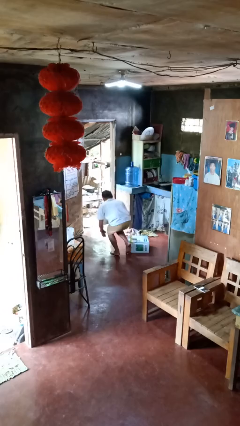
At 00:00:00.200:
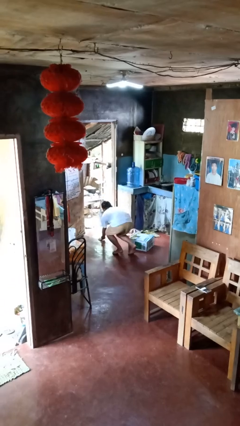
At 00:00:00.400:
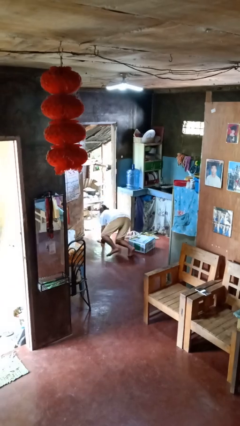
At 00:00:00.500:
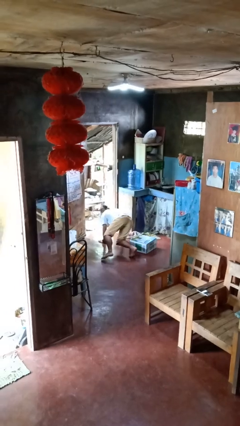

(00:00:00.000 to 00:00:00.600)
person trips on object on floor

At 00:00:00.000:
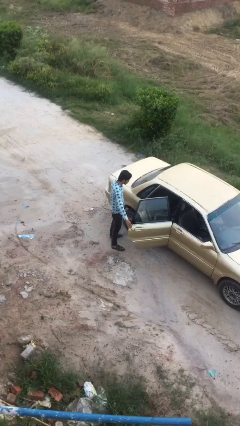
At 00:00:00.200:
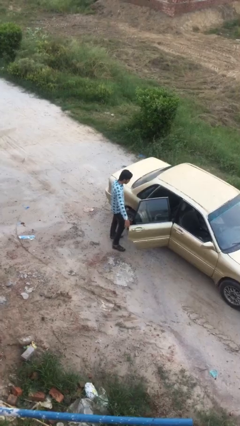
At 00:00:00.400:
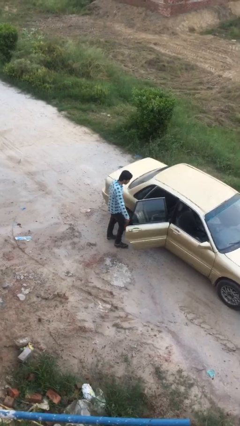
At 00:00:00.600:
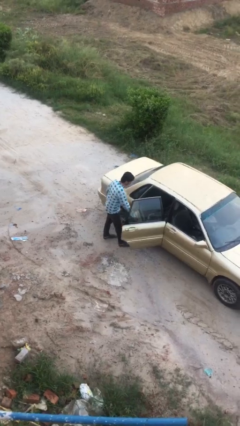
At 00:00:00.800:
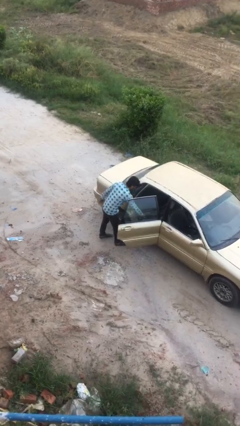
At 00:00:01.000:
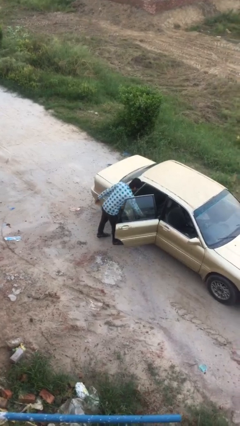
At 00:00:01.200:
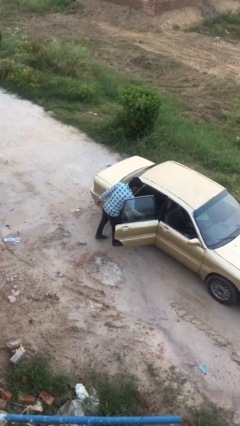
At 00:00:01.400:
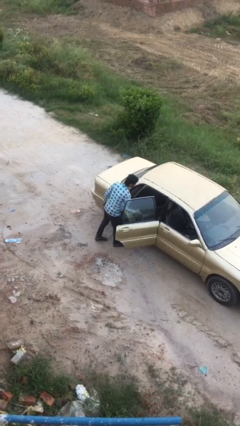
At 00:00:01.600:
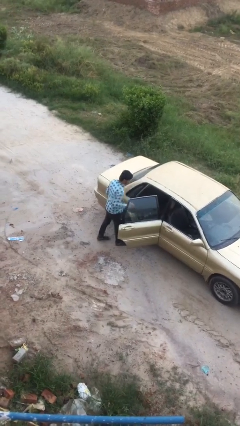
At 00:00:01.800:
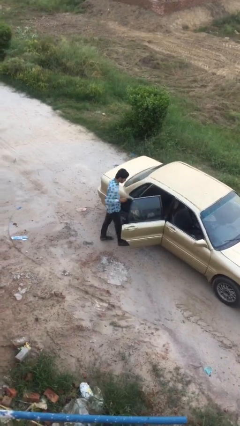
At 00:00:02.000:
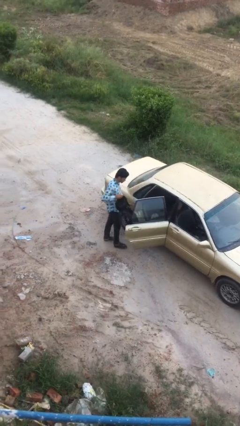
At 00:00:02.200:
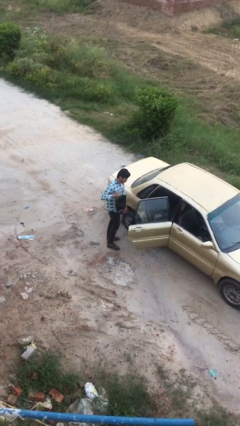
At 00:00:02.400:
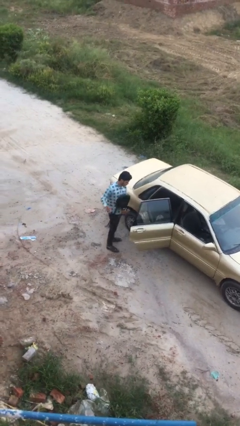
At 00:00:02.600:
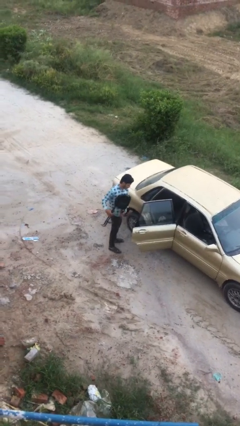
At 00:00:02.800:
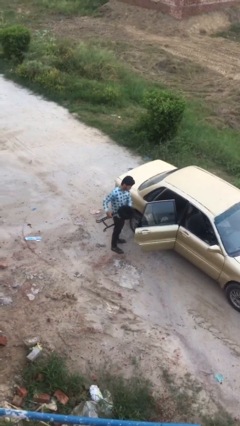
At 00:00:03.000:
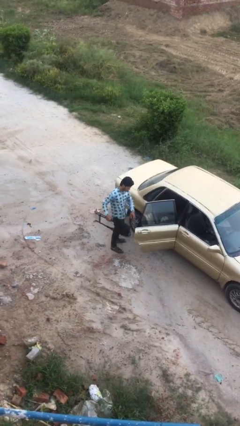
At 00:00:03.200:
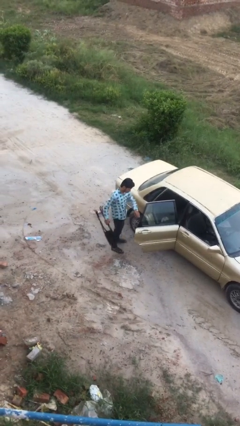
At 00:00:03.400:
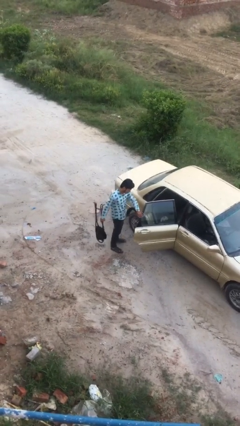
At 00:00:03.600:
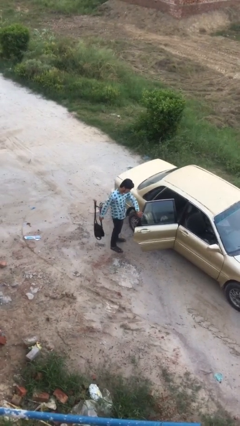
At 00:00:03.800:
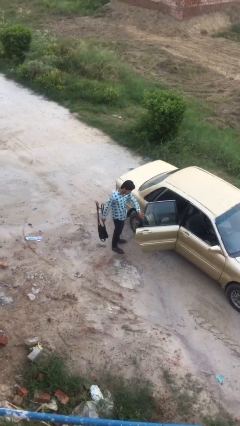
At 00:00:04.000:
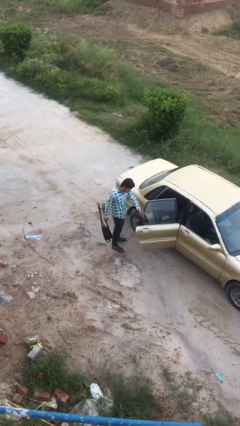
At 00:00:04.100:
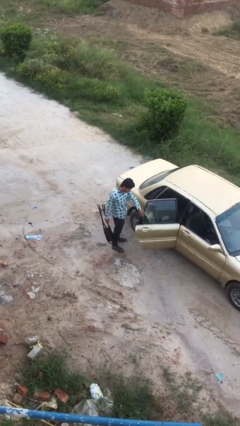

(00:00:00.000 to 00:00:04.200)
person unloads car

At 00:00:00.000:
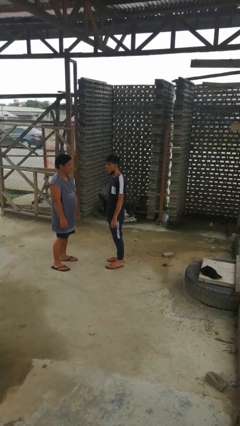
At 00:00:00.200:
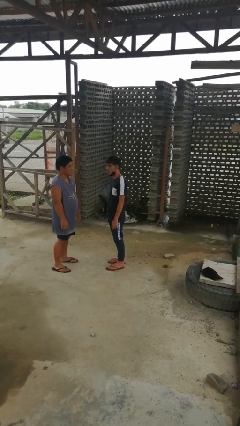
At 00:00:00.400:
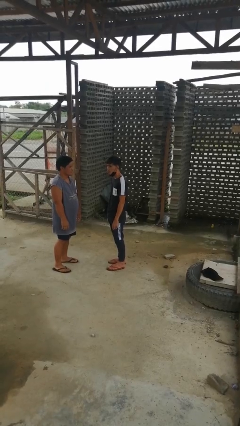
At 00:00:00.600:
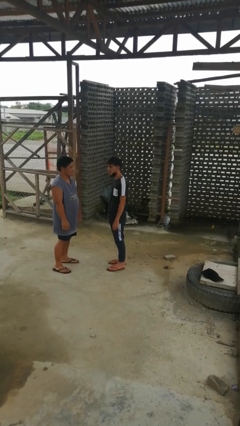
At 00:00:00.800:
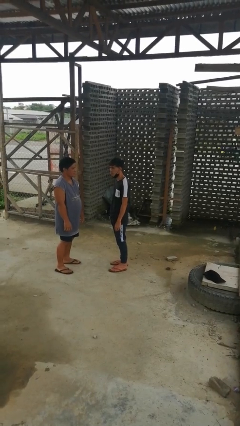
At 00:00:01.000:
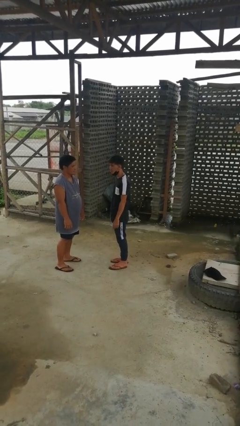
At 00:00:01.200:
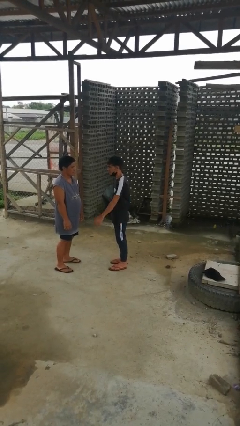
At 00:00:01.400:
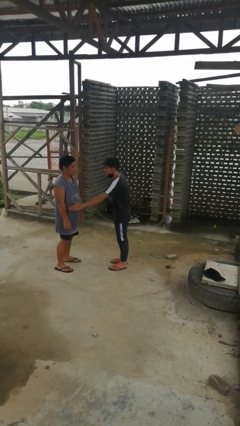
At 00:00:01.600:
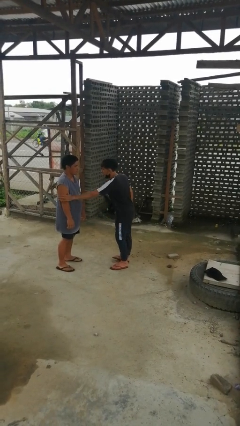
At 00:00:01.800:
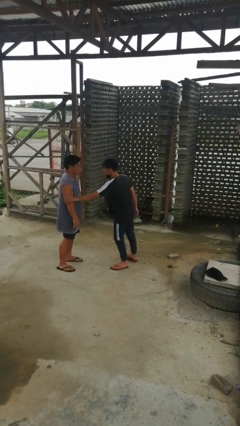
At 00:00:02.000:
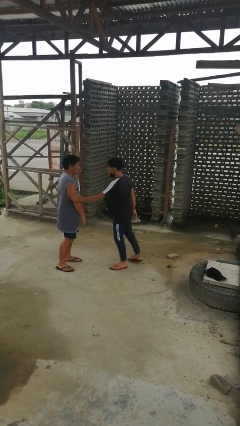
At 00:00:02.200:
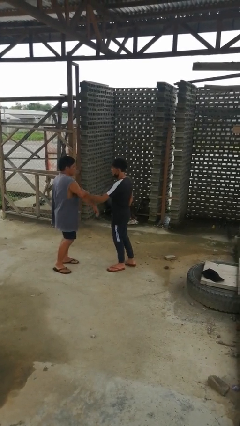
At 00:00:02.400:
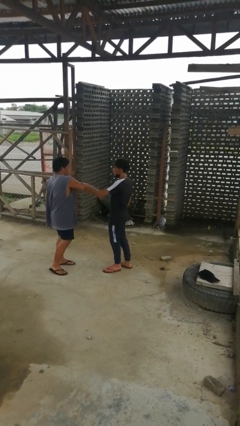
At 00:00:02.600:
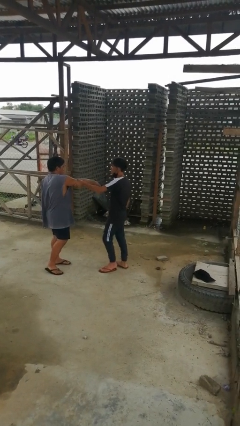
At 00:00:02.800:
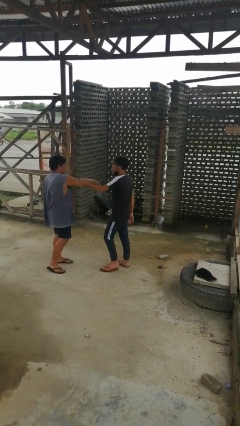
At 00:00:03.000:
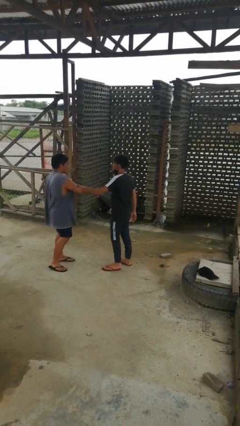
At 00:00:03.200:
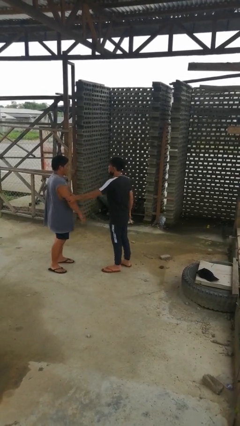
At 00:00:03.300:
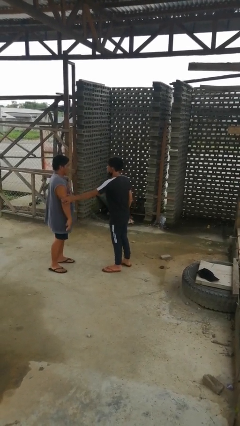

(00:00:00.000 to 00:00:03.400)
person grabs person by bicep

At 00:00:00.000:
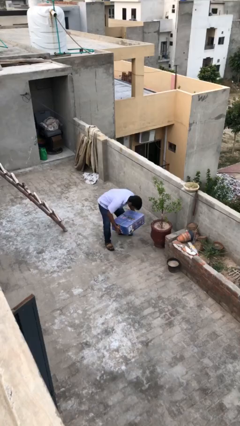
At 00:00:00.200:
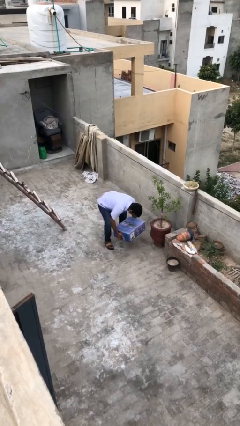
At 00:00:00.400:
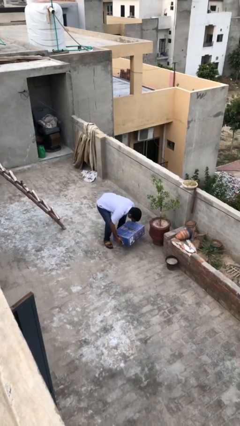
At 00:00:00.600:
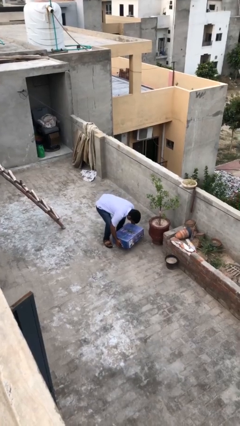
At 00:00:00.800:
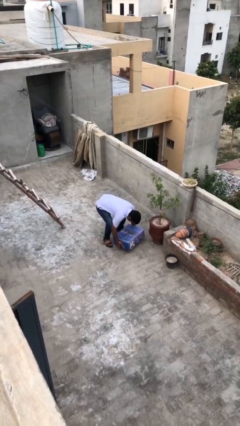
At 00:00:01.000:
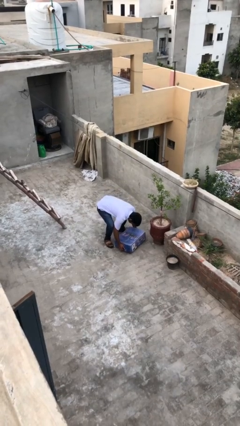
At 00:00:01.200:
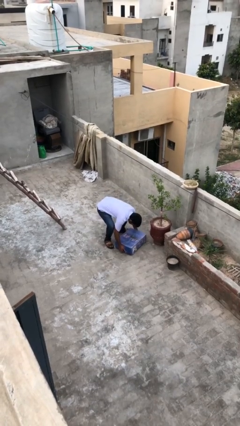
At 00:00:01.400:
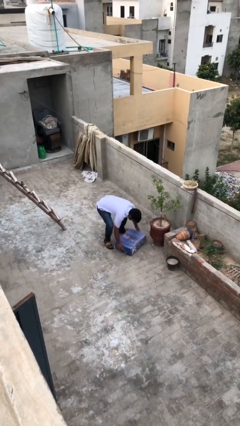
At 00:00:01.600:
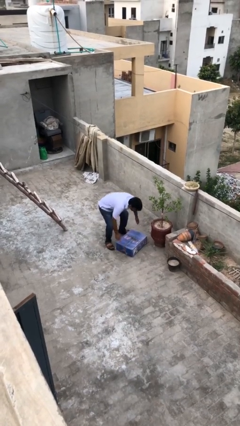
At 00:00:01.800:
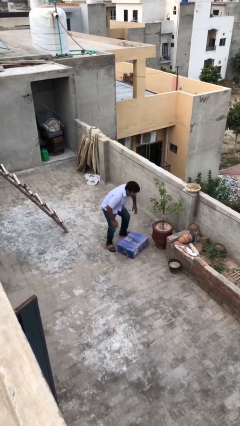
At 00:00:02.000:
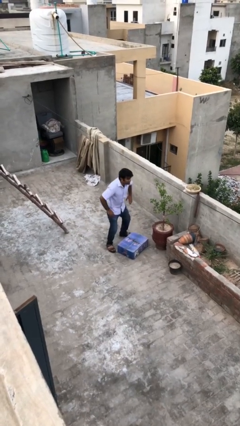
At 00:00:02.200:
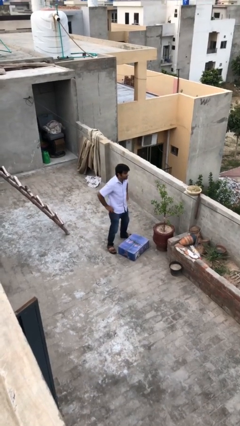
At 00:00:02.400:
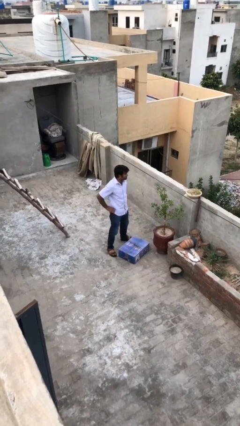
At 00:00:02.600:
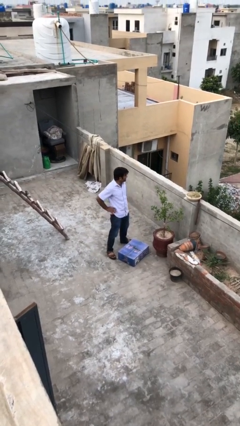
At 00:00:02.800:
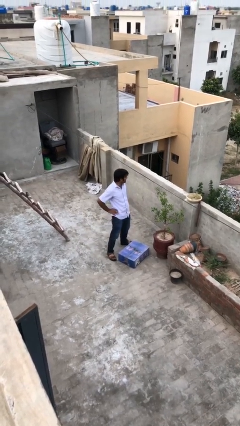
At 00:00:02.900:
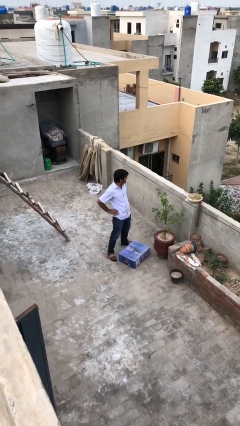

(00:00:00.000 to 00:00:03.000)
person puts down object on floor

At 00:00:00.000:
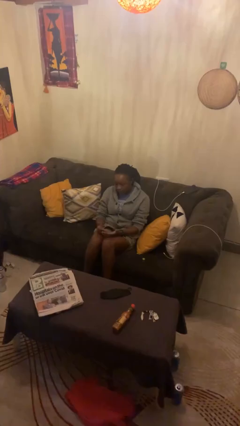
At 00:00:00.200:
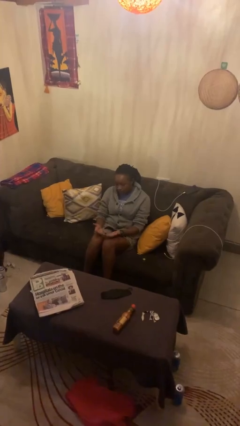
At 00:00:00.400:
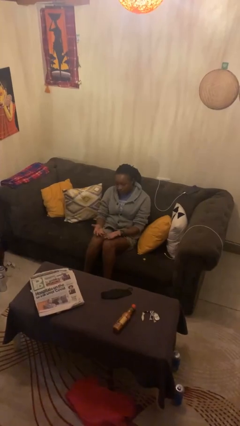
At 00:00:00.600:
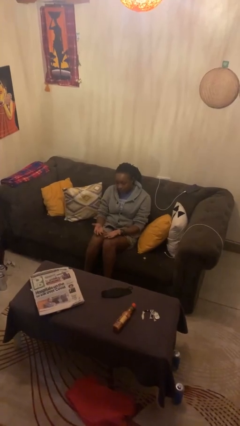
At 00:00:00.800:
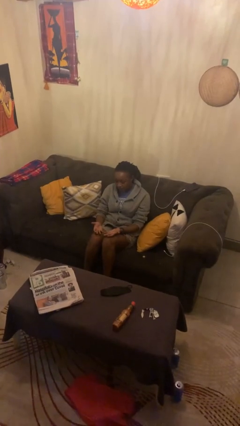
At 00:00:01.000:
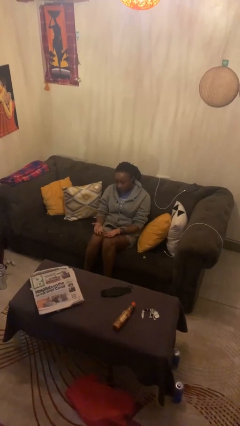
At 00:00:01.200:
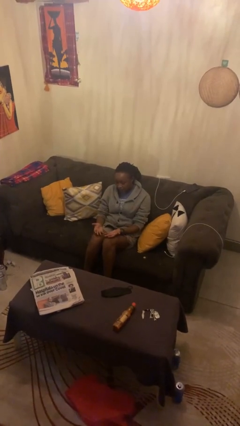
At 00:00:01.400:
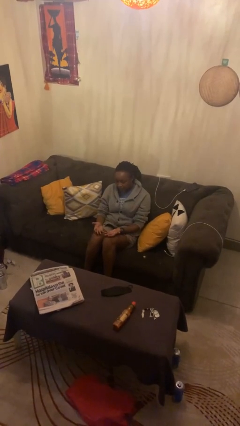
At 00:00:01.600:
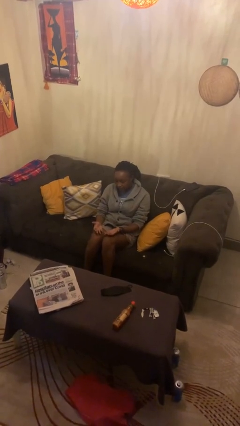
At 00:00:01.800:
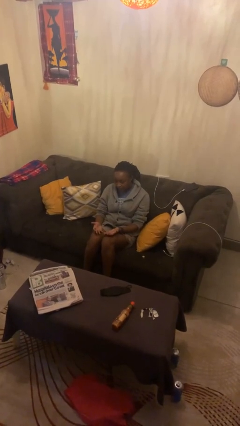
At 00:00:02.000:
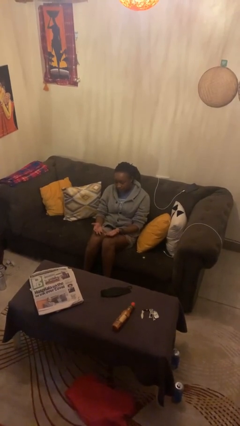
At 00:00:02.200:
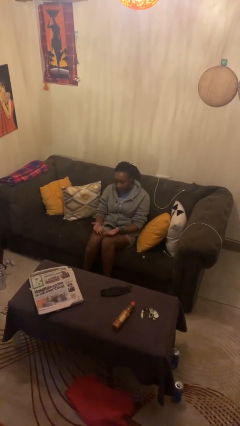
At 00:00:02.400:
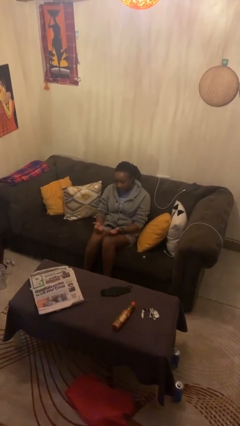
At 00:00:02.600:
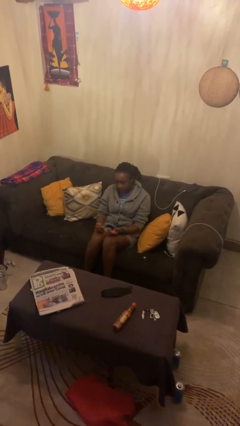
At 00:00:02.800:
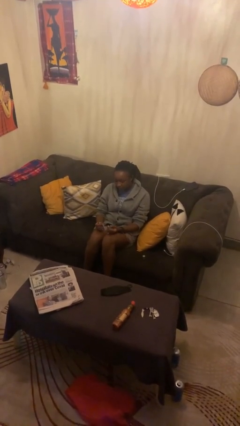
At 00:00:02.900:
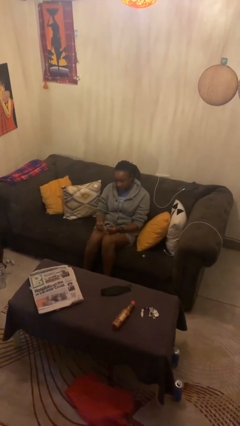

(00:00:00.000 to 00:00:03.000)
person looks at hands in lap

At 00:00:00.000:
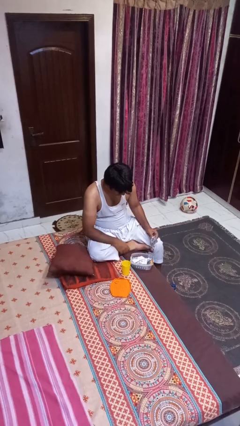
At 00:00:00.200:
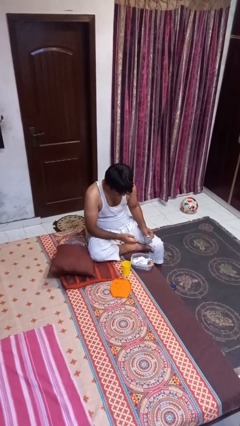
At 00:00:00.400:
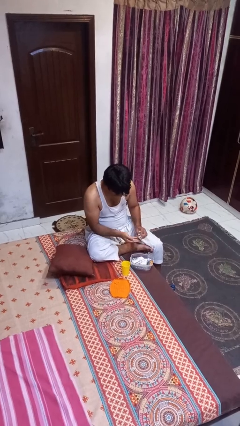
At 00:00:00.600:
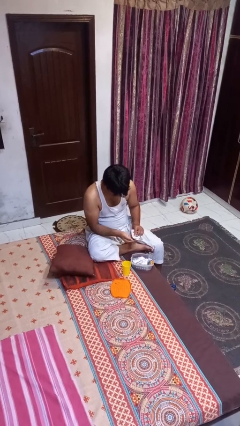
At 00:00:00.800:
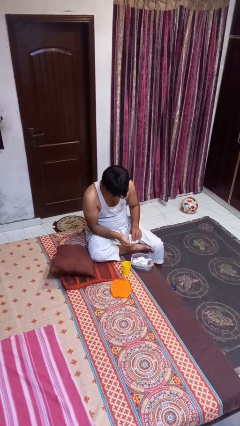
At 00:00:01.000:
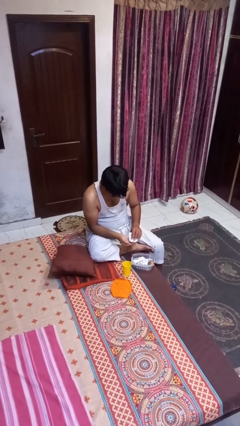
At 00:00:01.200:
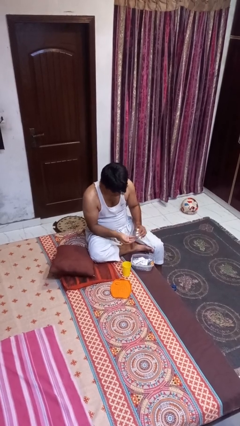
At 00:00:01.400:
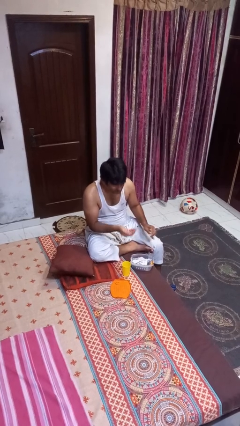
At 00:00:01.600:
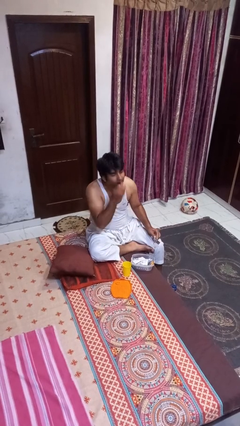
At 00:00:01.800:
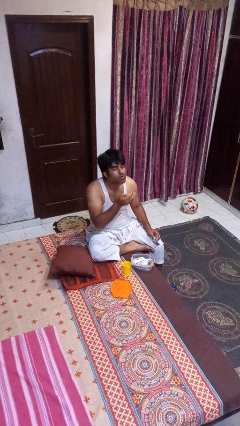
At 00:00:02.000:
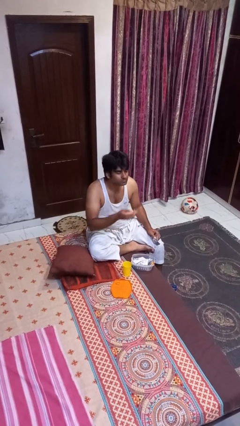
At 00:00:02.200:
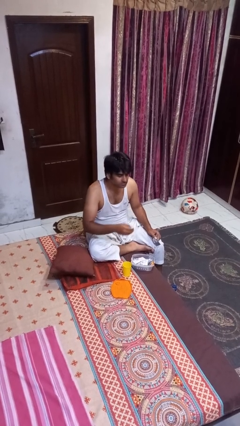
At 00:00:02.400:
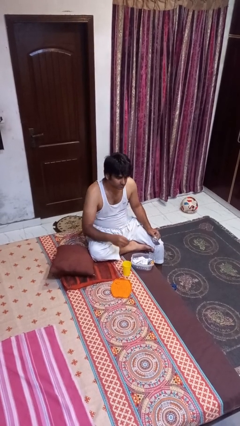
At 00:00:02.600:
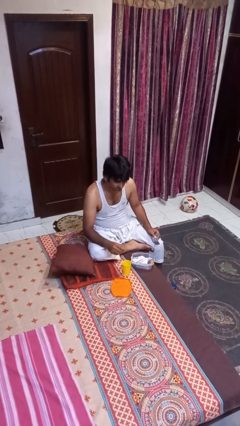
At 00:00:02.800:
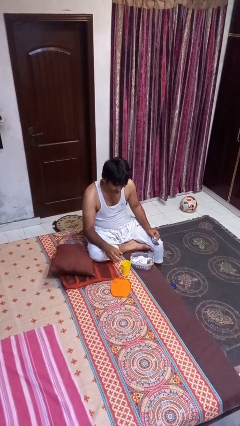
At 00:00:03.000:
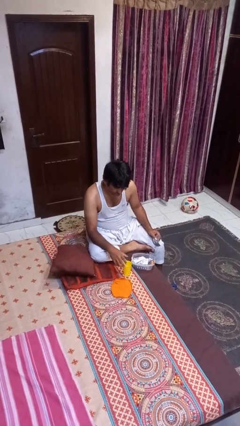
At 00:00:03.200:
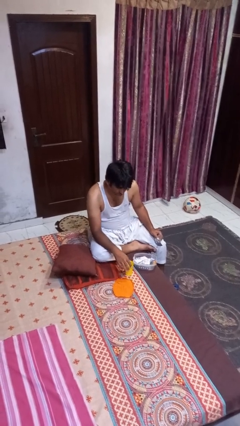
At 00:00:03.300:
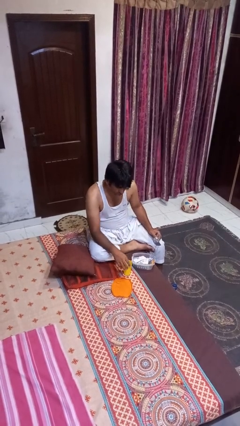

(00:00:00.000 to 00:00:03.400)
person takes medicine pills
